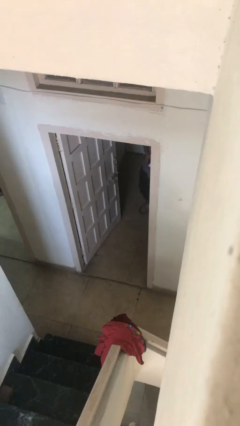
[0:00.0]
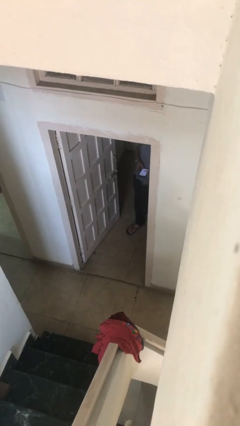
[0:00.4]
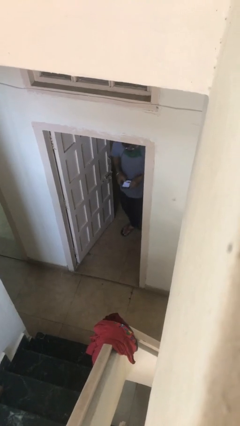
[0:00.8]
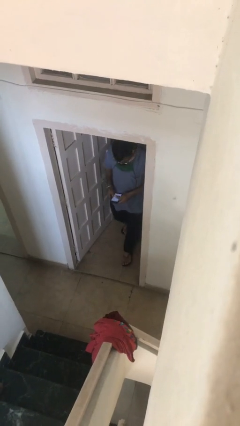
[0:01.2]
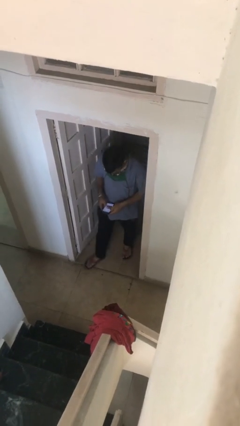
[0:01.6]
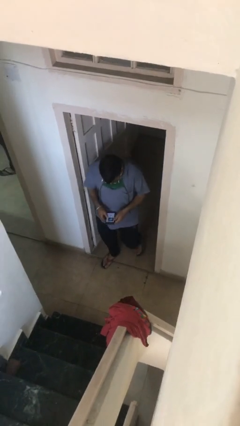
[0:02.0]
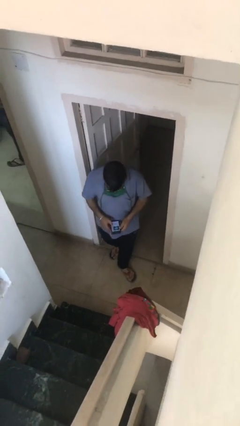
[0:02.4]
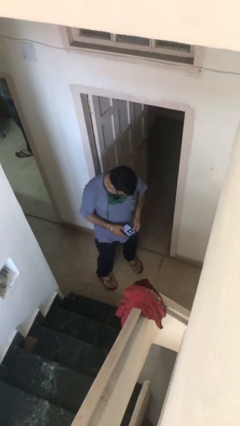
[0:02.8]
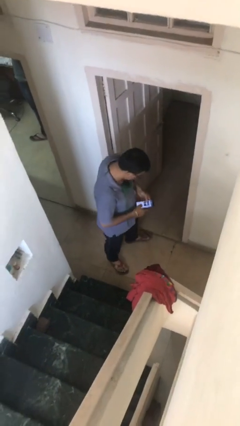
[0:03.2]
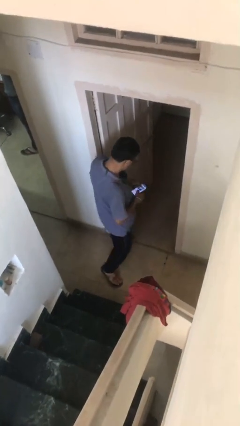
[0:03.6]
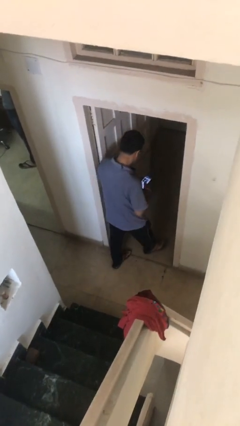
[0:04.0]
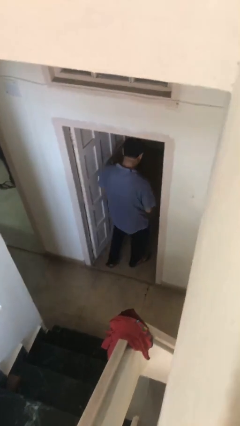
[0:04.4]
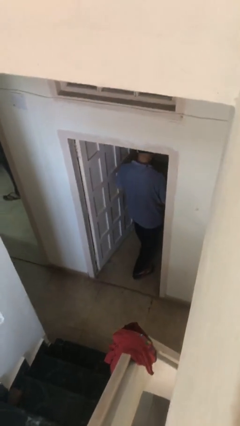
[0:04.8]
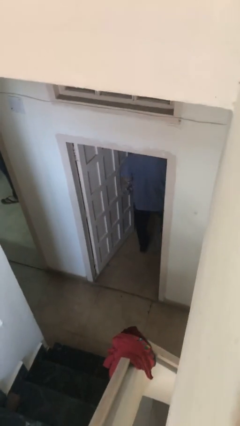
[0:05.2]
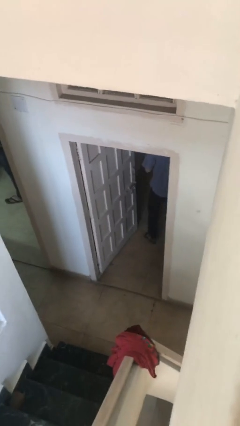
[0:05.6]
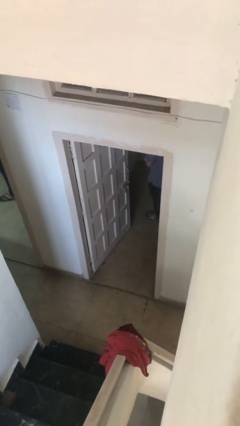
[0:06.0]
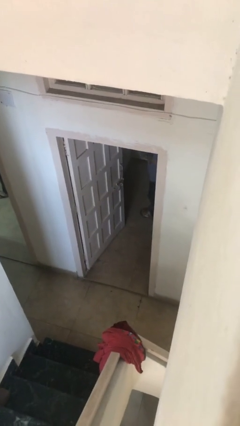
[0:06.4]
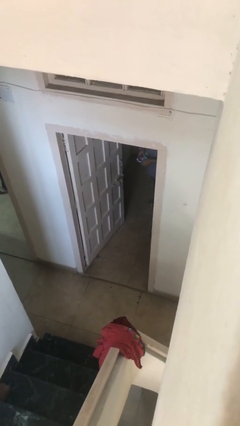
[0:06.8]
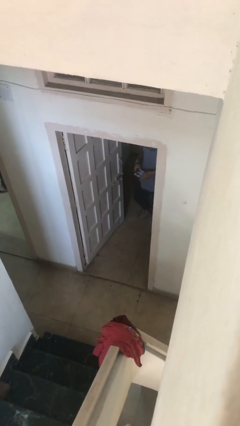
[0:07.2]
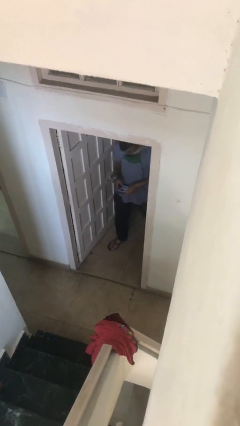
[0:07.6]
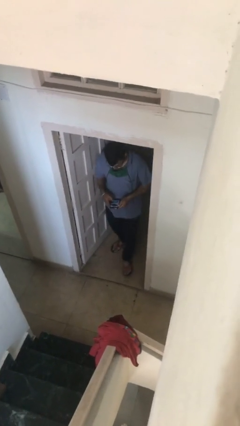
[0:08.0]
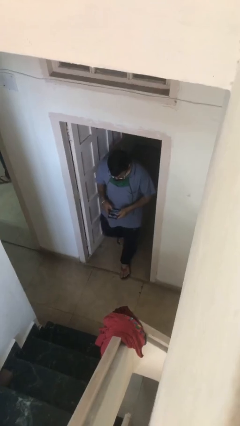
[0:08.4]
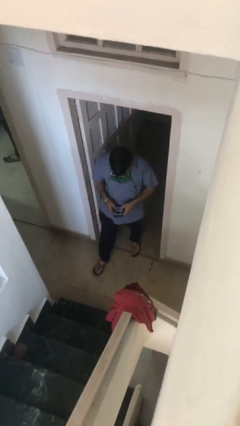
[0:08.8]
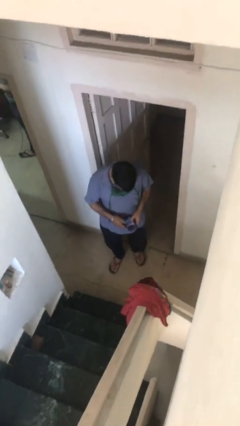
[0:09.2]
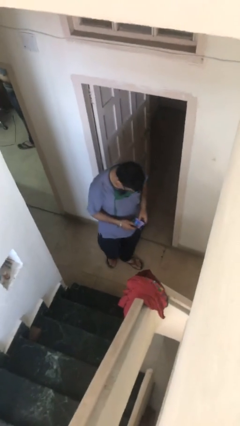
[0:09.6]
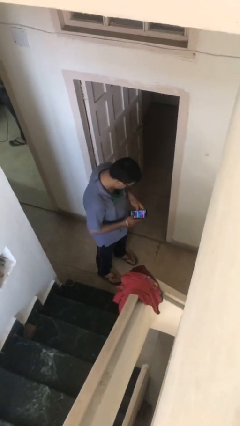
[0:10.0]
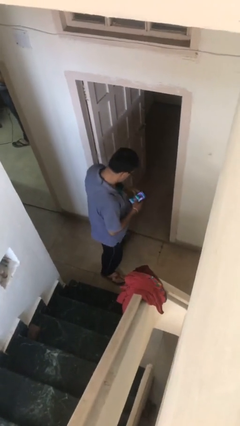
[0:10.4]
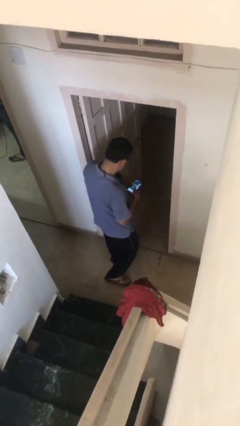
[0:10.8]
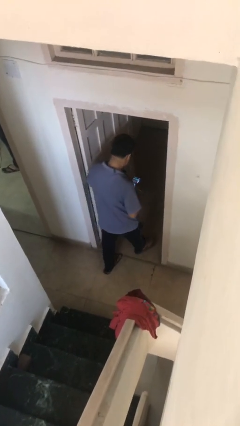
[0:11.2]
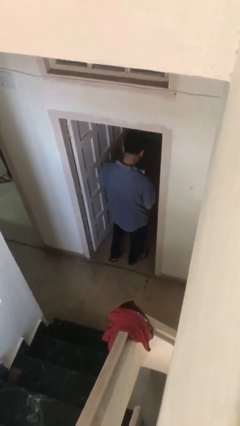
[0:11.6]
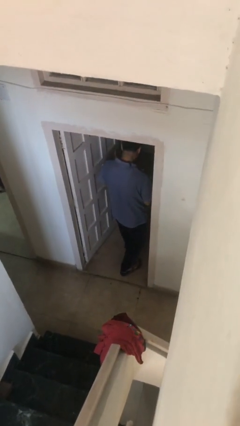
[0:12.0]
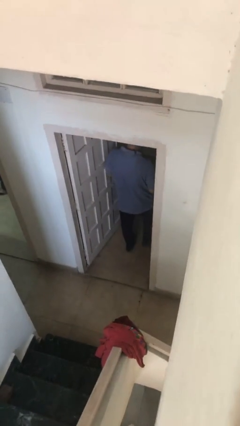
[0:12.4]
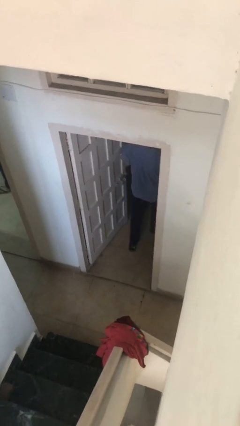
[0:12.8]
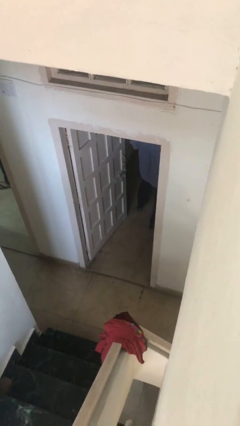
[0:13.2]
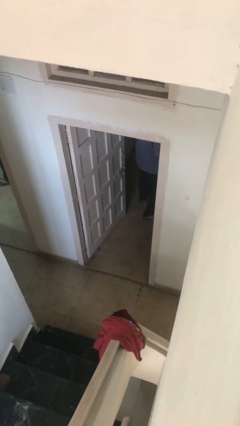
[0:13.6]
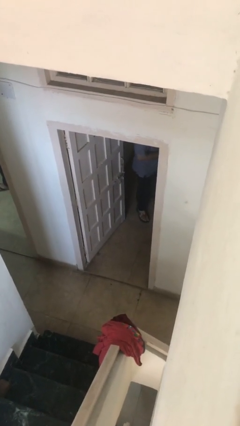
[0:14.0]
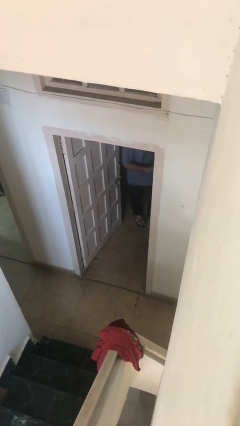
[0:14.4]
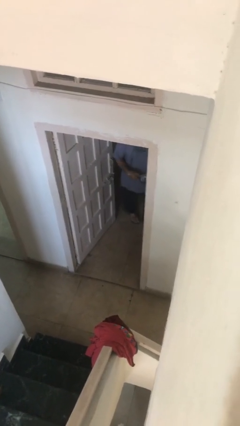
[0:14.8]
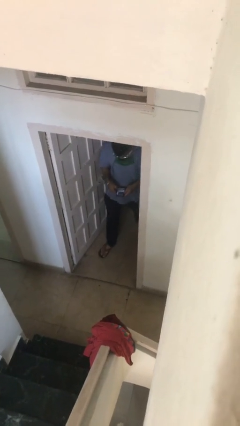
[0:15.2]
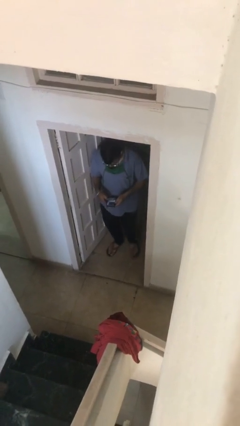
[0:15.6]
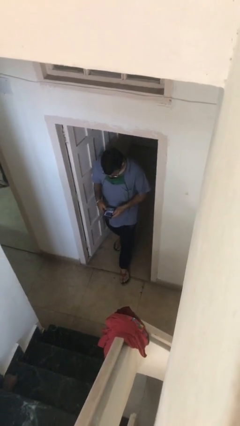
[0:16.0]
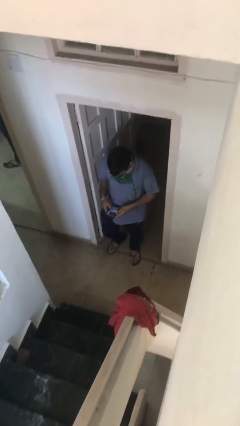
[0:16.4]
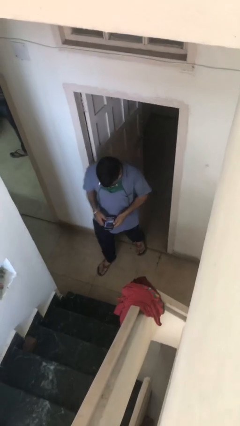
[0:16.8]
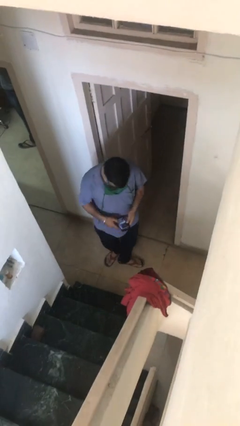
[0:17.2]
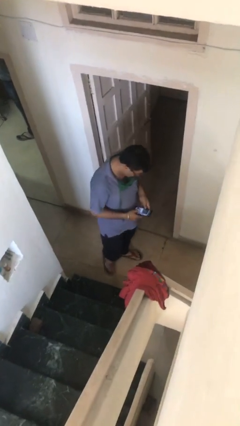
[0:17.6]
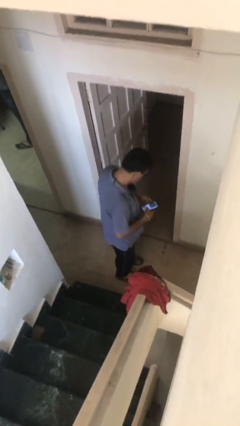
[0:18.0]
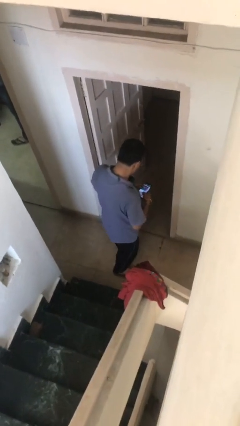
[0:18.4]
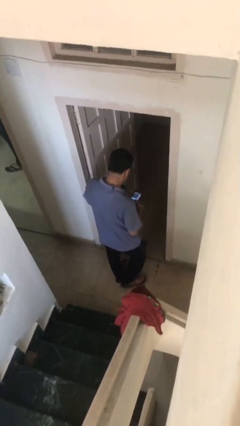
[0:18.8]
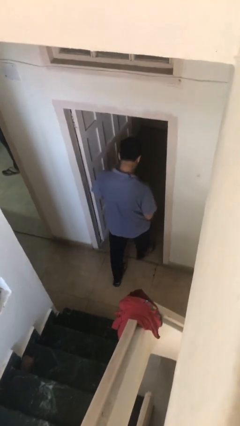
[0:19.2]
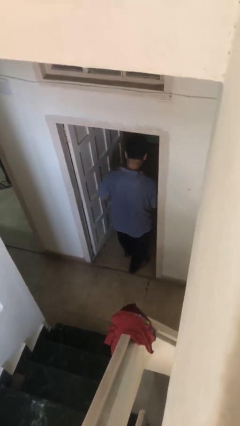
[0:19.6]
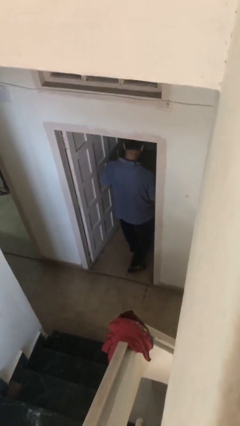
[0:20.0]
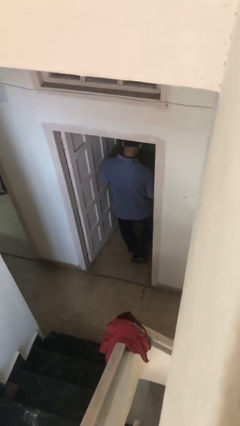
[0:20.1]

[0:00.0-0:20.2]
person texts on phone

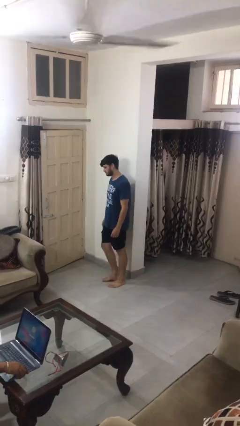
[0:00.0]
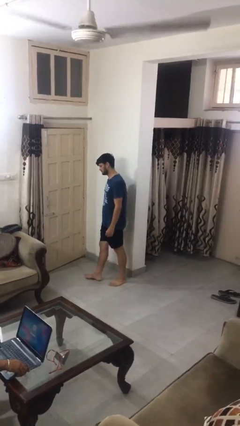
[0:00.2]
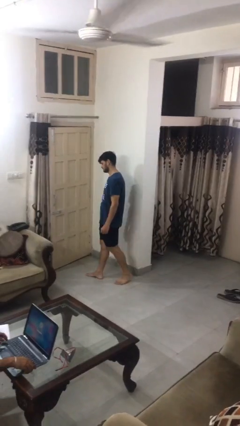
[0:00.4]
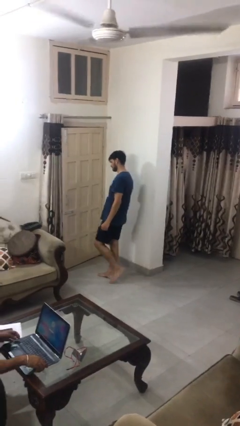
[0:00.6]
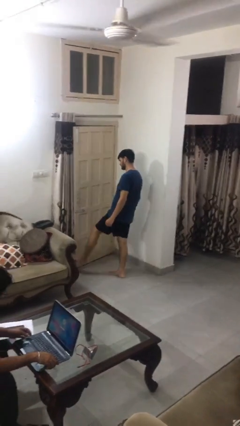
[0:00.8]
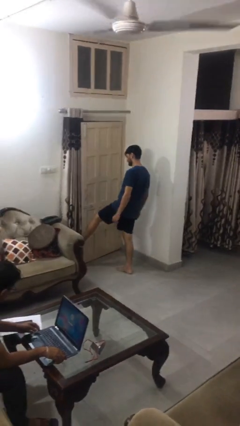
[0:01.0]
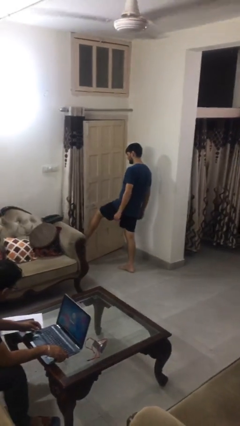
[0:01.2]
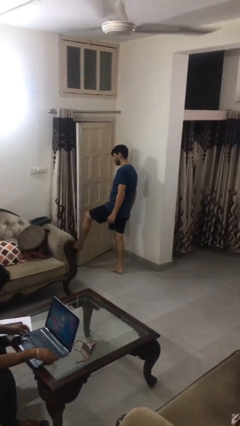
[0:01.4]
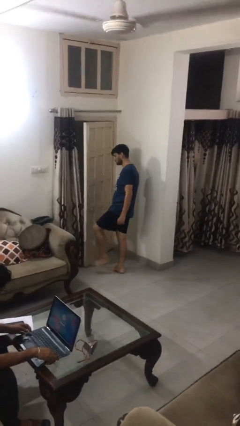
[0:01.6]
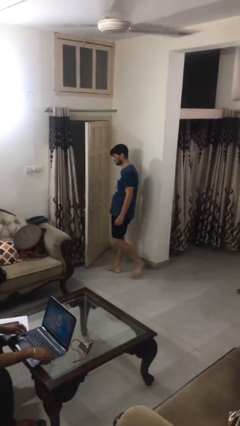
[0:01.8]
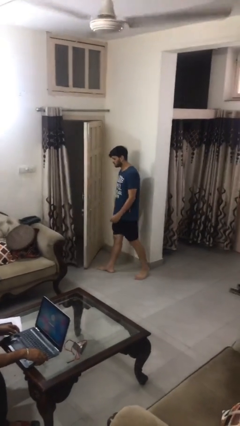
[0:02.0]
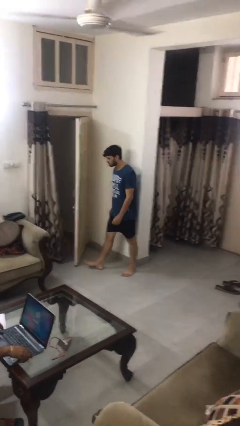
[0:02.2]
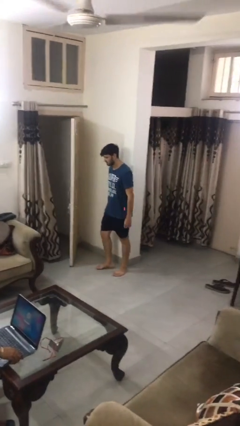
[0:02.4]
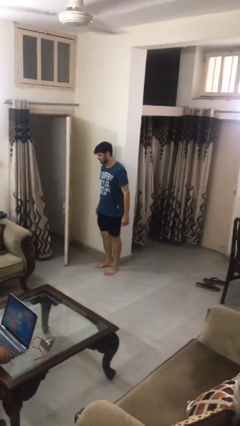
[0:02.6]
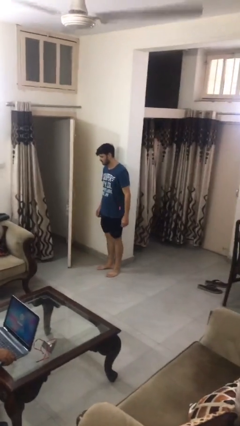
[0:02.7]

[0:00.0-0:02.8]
person opens facility door

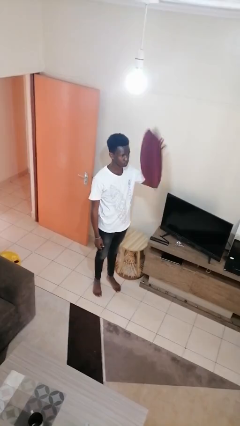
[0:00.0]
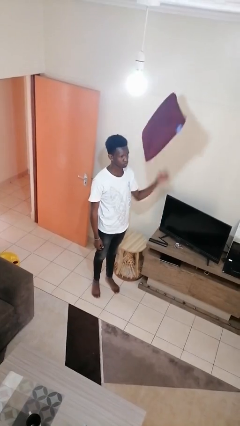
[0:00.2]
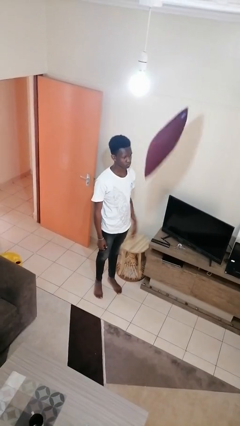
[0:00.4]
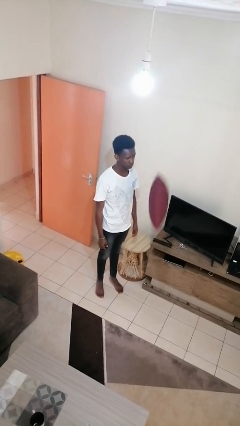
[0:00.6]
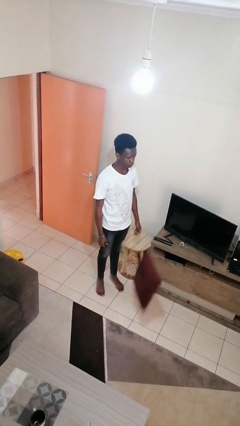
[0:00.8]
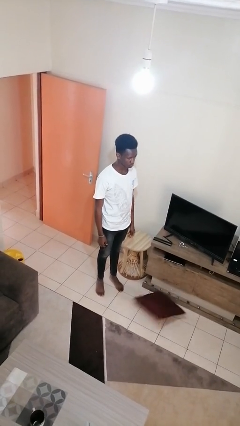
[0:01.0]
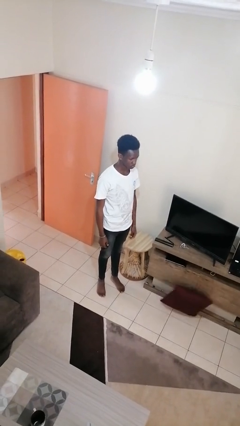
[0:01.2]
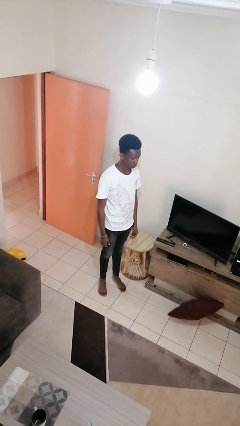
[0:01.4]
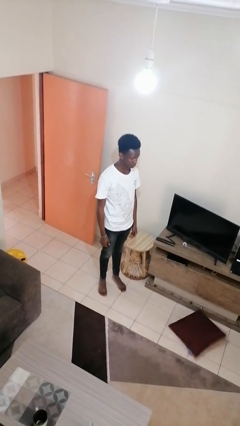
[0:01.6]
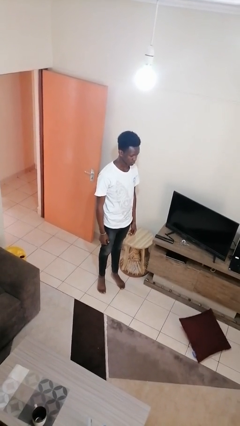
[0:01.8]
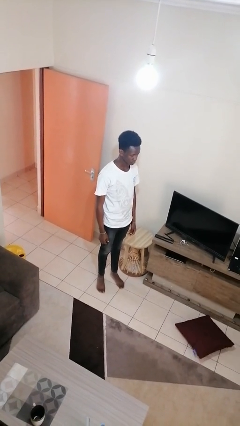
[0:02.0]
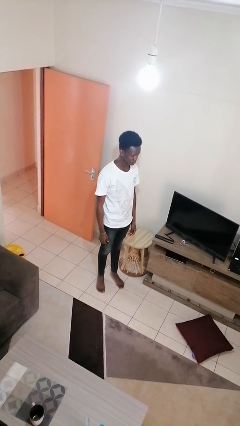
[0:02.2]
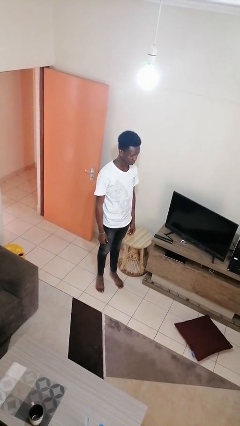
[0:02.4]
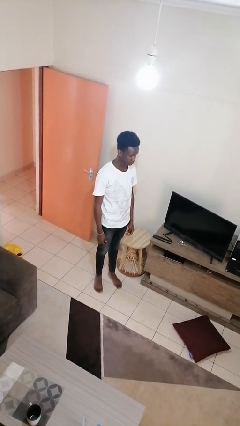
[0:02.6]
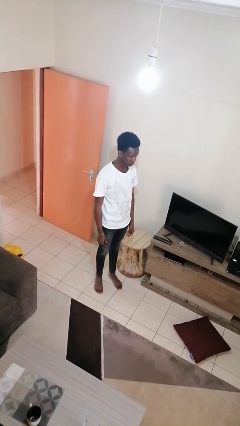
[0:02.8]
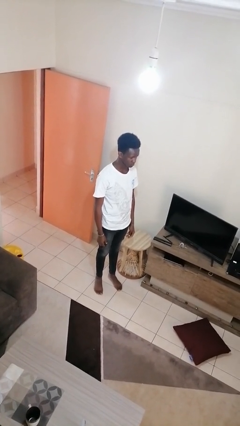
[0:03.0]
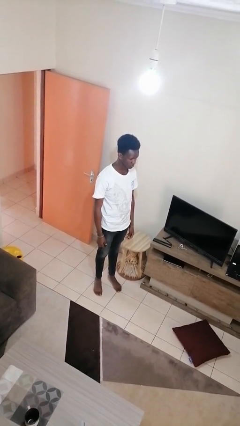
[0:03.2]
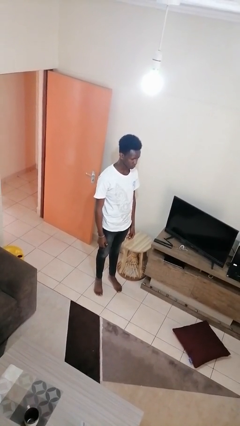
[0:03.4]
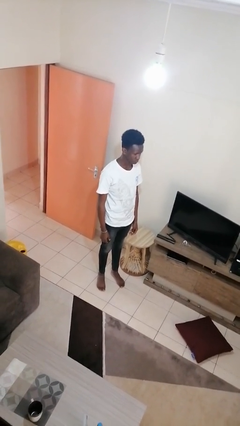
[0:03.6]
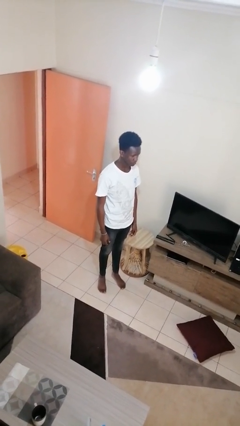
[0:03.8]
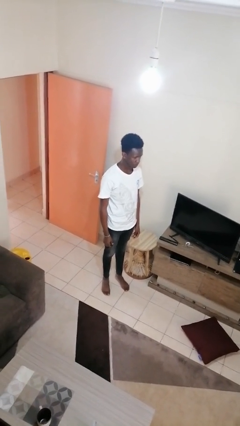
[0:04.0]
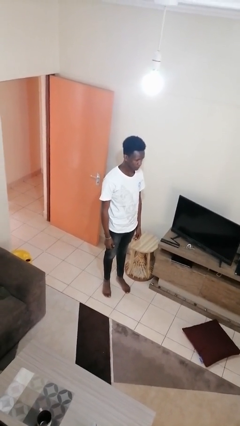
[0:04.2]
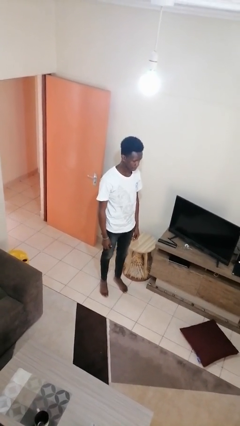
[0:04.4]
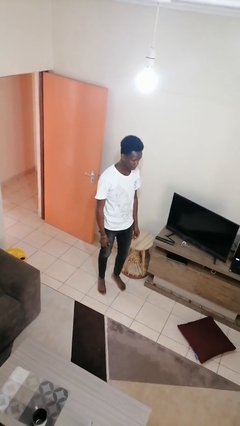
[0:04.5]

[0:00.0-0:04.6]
person throws object into air
